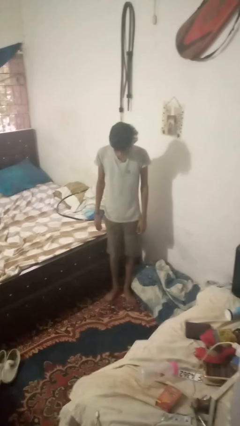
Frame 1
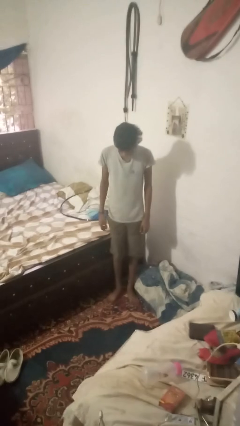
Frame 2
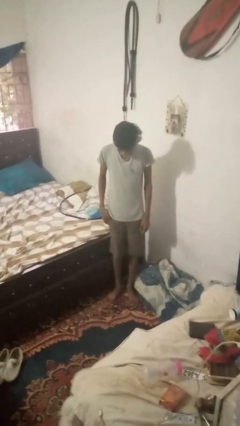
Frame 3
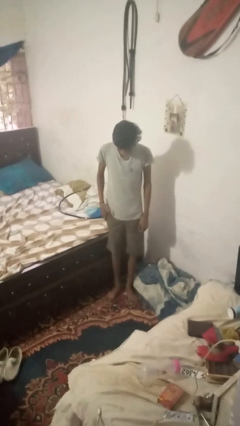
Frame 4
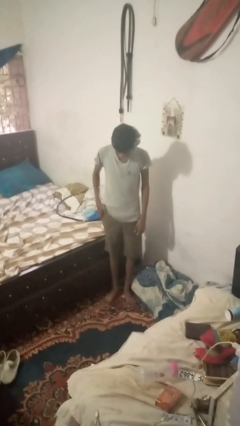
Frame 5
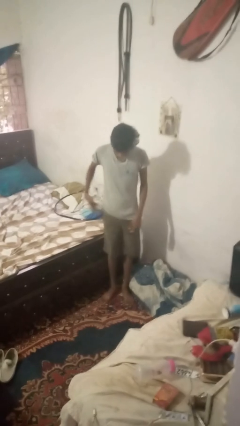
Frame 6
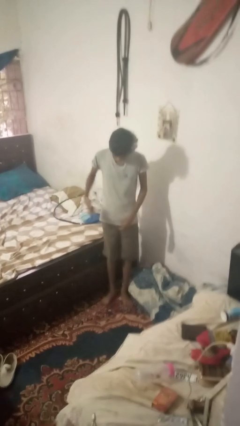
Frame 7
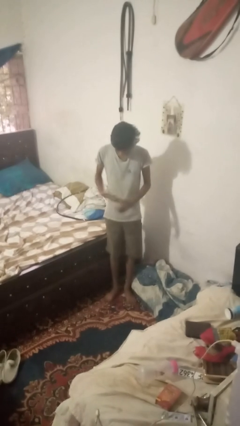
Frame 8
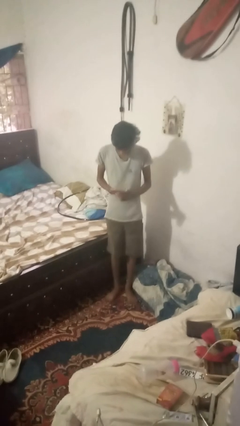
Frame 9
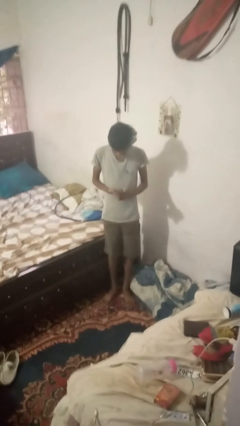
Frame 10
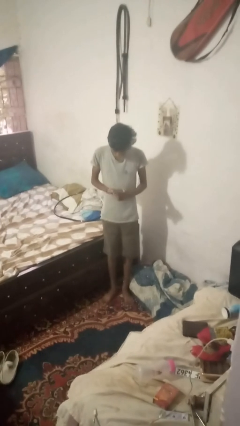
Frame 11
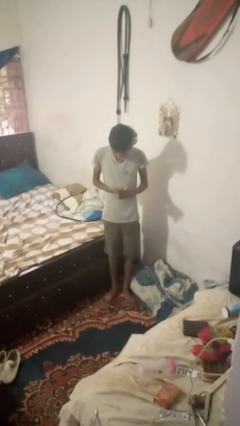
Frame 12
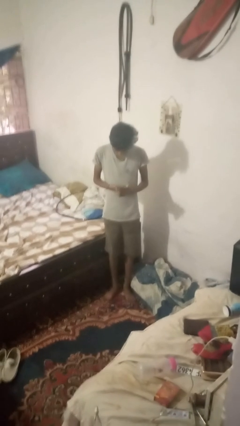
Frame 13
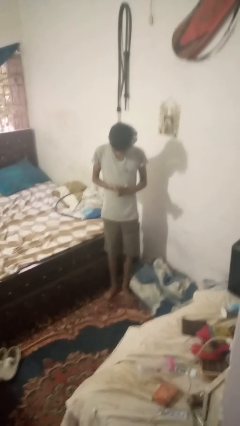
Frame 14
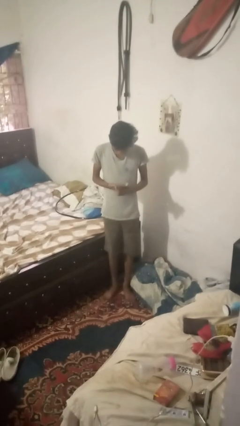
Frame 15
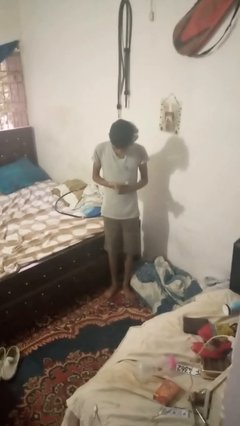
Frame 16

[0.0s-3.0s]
person takes phone from pocket

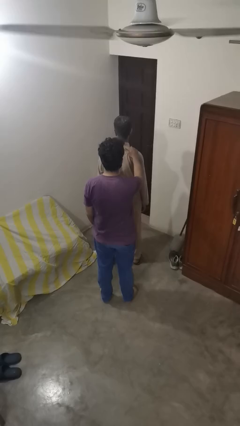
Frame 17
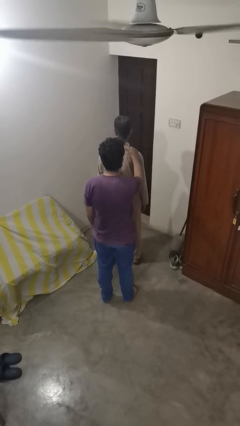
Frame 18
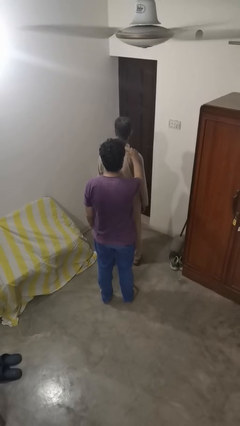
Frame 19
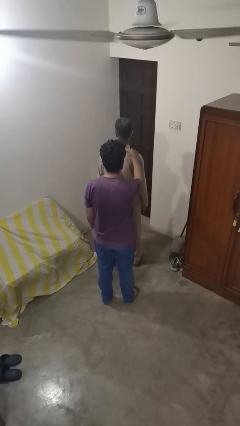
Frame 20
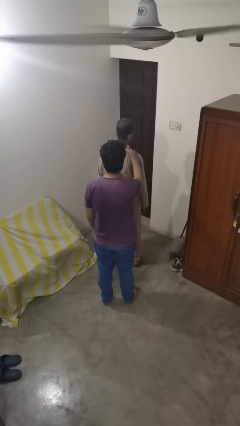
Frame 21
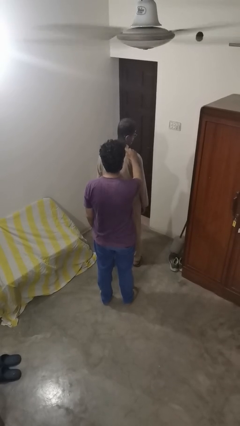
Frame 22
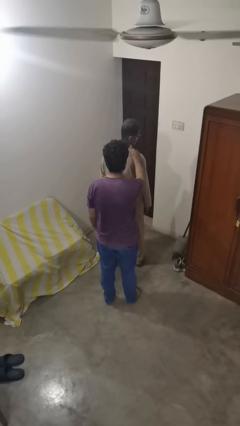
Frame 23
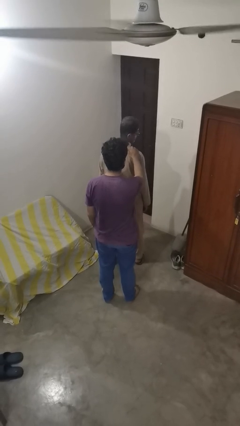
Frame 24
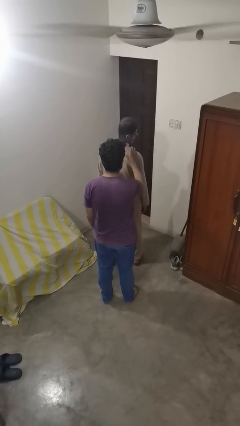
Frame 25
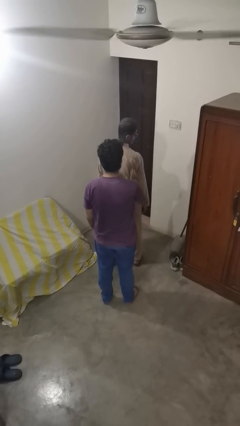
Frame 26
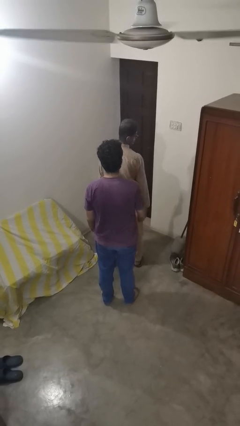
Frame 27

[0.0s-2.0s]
person grabs person by shoulder

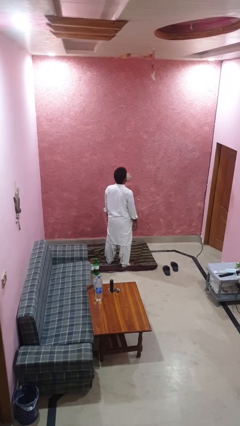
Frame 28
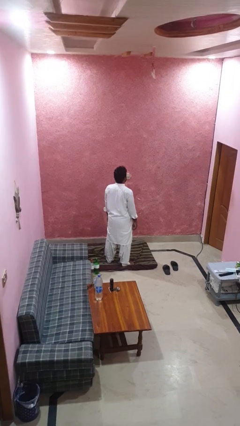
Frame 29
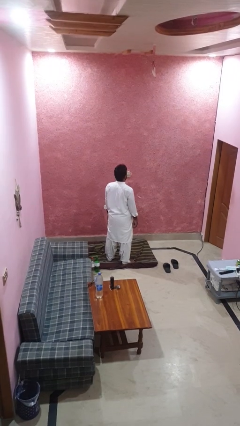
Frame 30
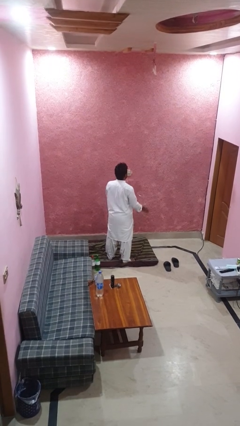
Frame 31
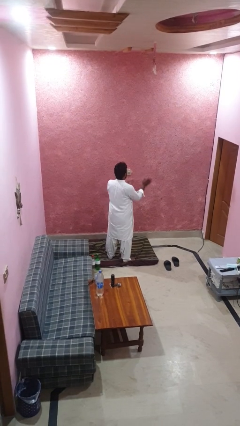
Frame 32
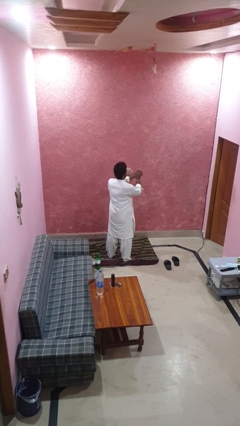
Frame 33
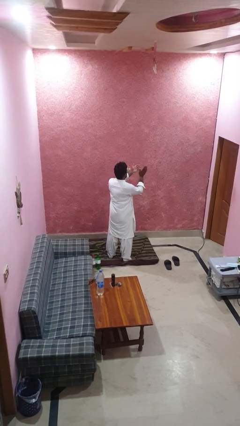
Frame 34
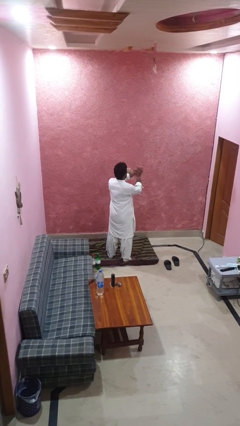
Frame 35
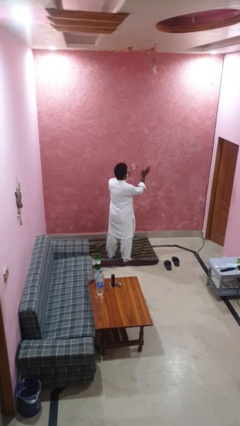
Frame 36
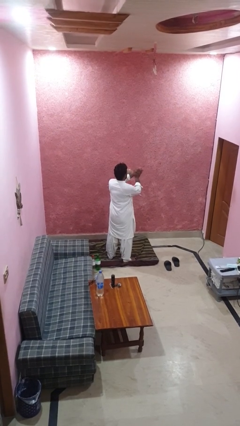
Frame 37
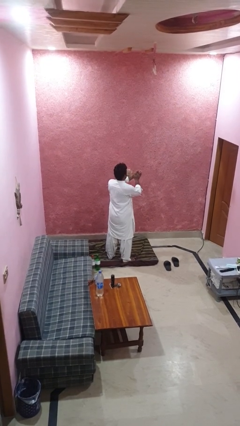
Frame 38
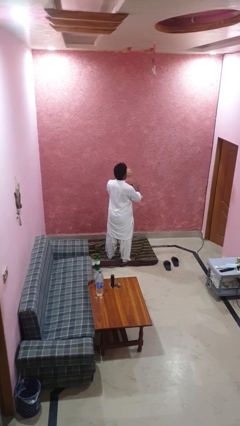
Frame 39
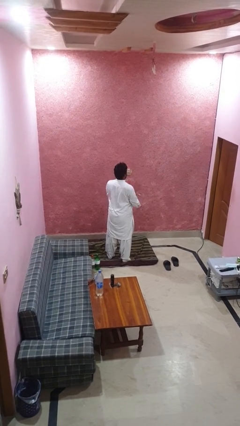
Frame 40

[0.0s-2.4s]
person claps hands

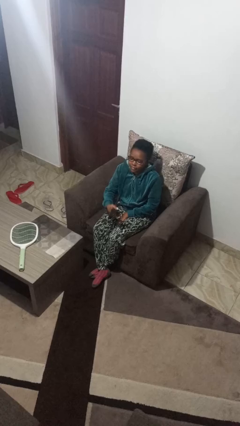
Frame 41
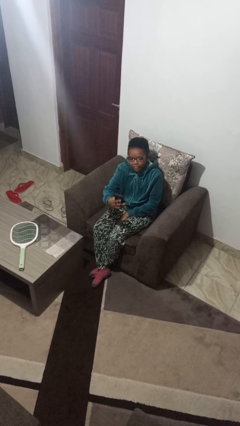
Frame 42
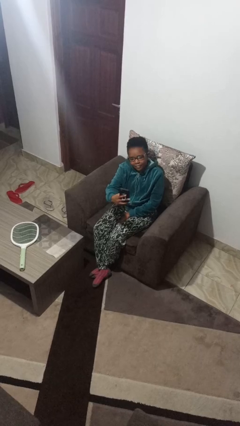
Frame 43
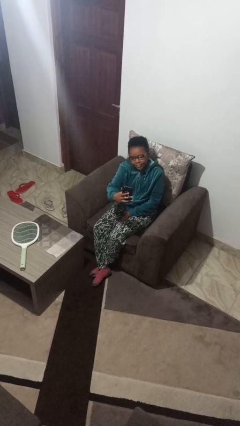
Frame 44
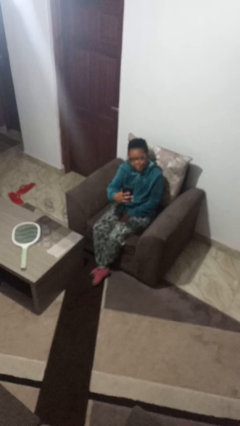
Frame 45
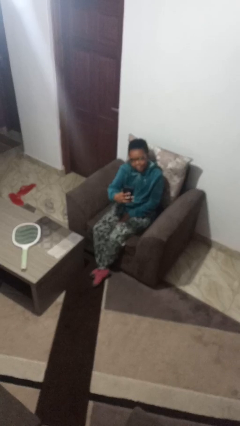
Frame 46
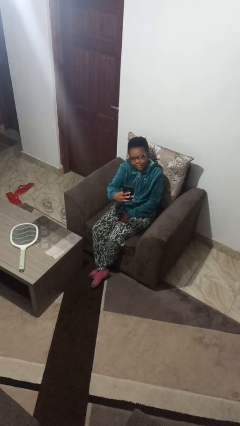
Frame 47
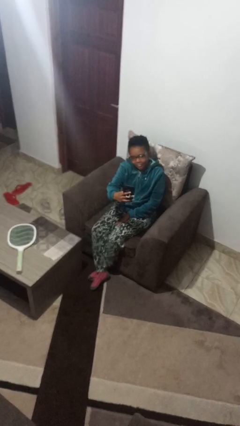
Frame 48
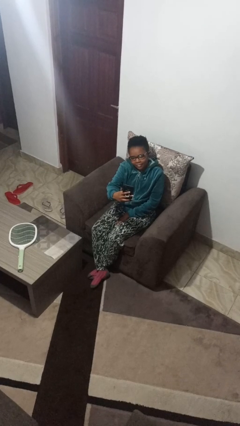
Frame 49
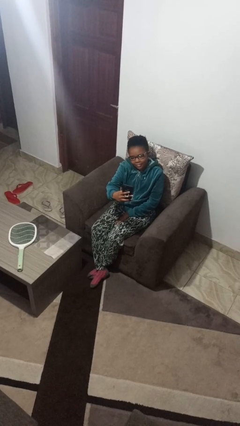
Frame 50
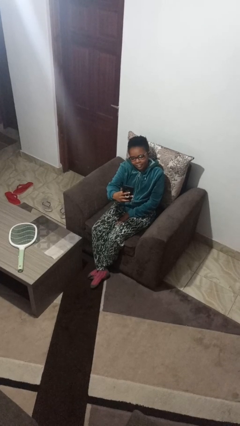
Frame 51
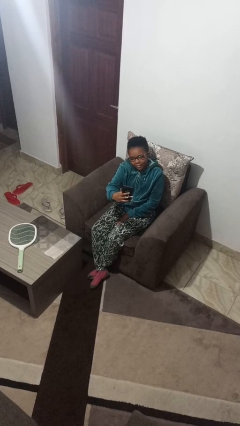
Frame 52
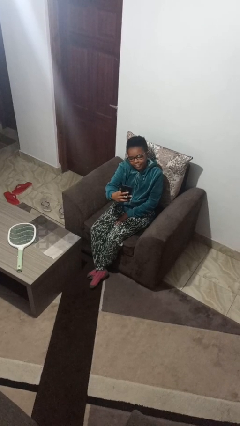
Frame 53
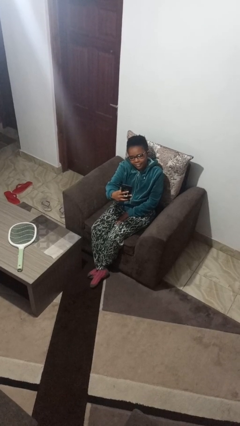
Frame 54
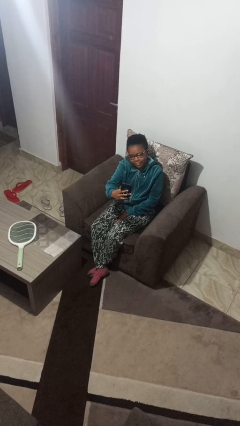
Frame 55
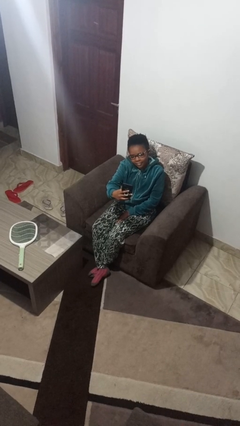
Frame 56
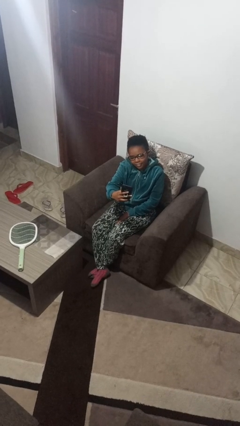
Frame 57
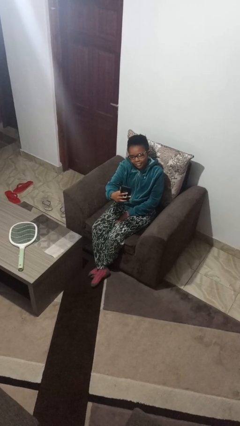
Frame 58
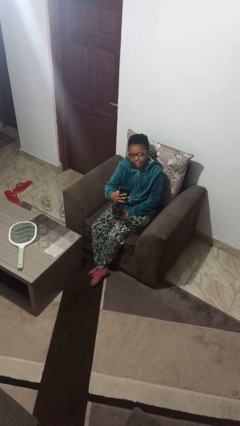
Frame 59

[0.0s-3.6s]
person takes selfie

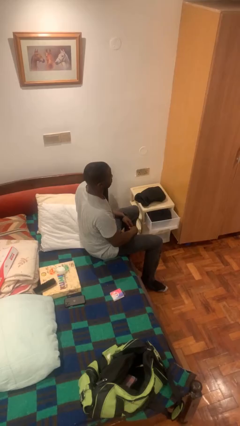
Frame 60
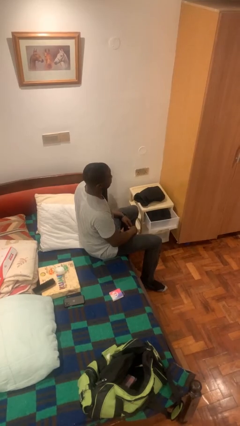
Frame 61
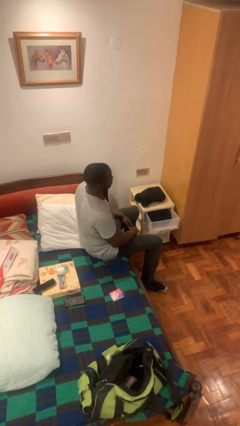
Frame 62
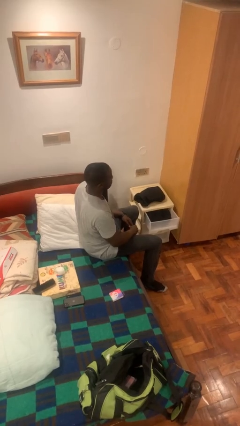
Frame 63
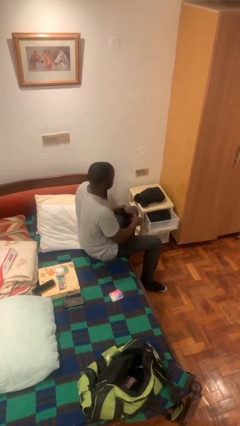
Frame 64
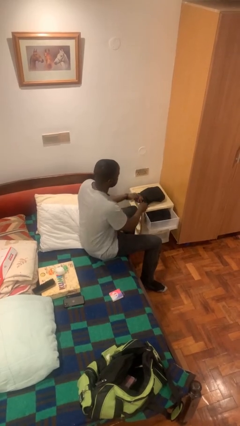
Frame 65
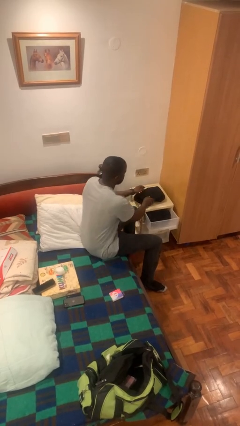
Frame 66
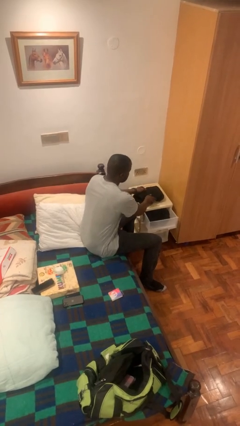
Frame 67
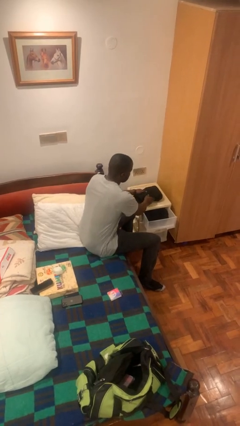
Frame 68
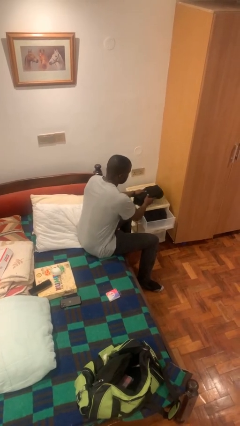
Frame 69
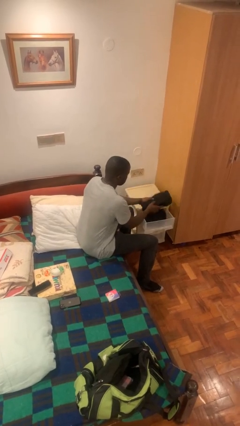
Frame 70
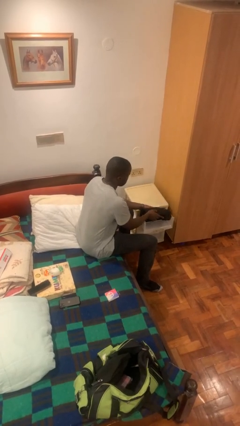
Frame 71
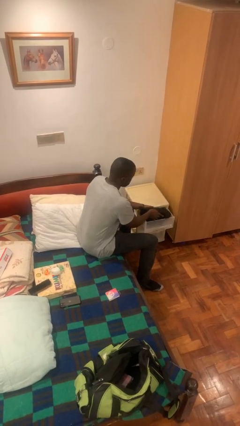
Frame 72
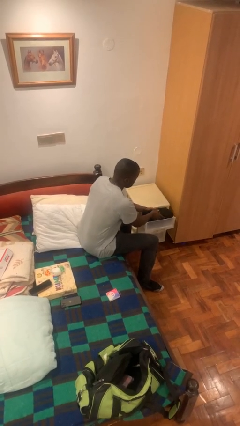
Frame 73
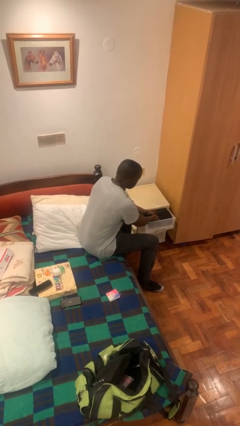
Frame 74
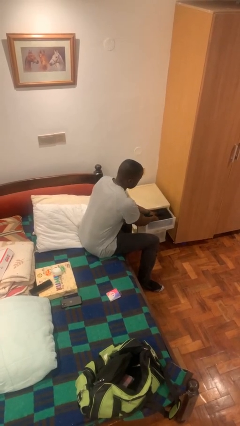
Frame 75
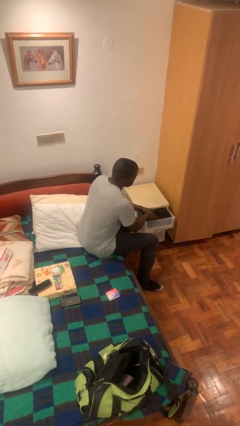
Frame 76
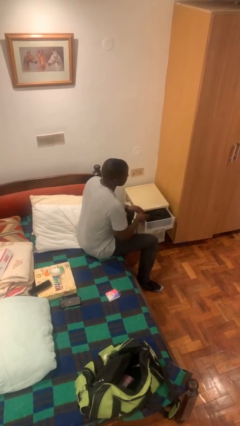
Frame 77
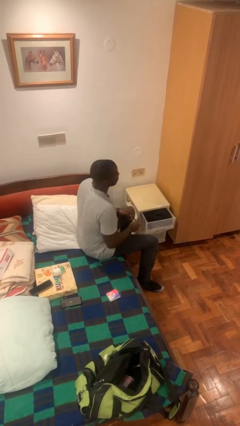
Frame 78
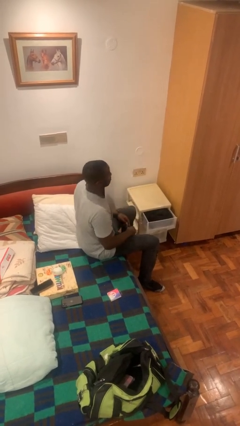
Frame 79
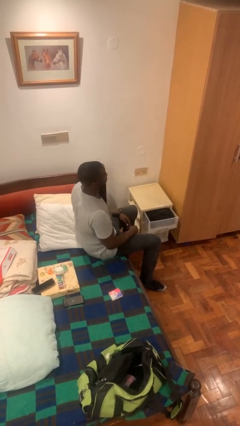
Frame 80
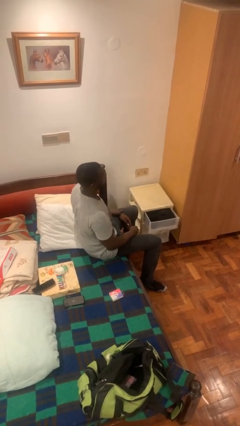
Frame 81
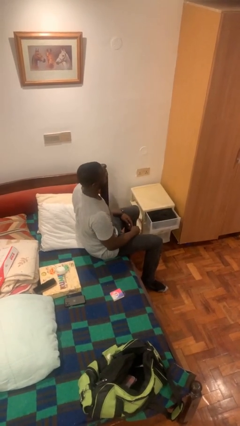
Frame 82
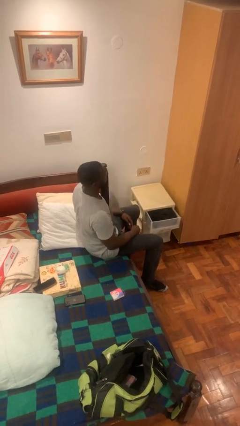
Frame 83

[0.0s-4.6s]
person puts clothes into dresser

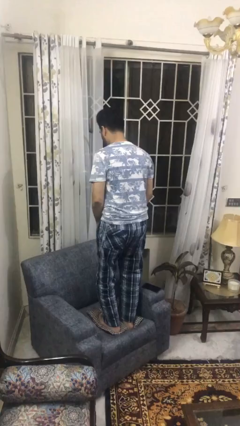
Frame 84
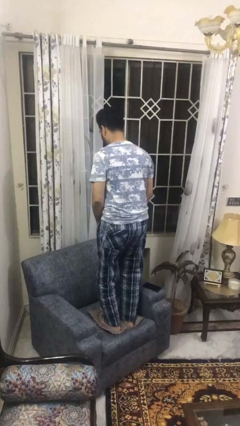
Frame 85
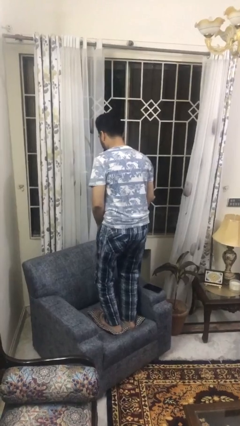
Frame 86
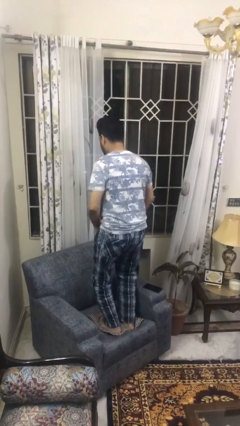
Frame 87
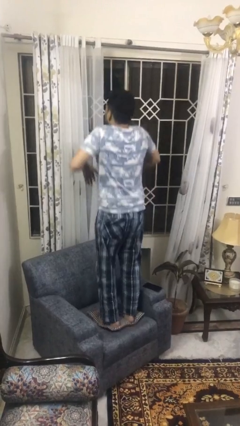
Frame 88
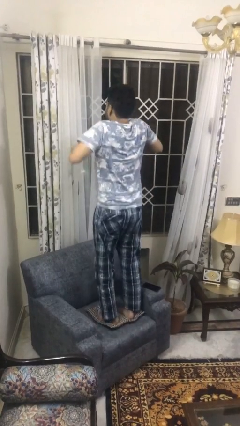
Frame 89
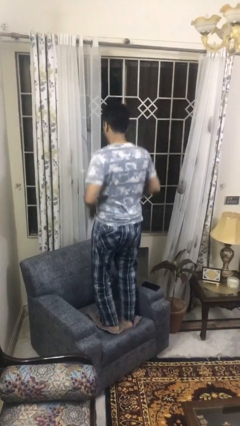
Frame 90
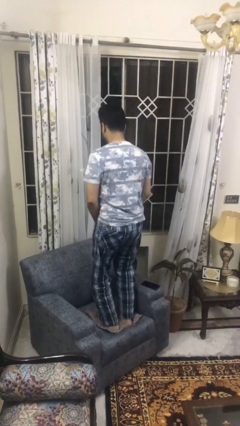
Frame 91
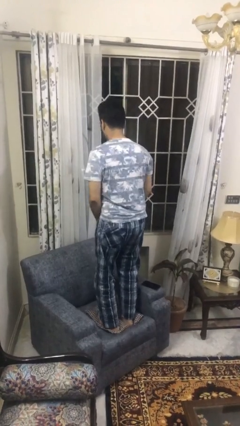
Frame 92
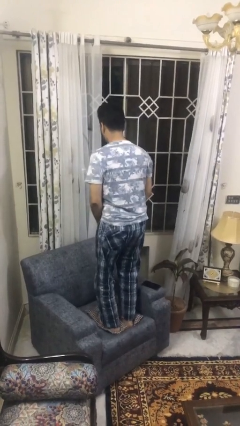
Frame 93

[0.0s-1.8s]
person jumps on couch
